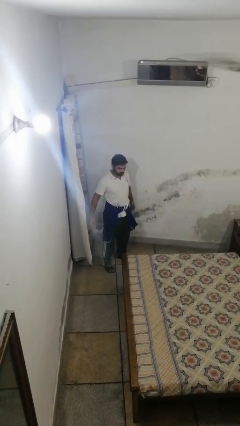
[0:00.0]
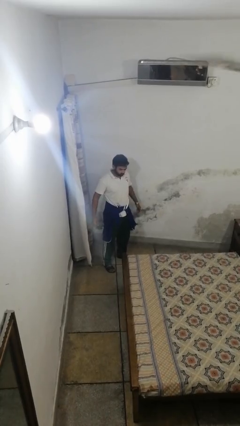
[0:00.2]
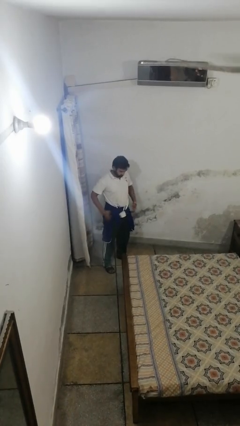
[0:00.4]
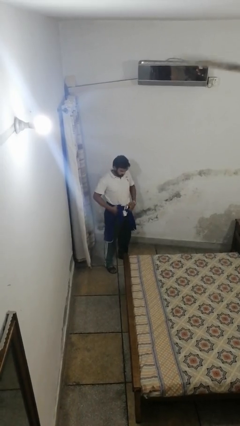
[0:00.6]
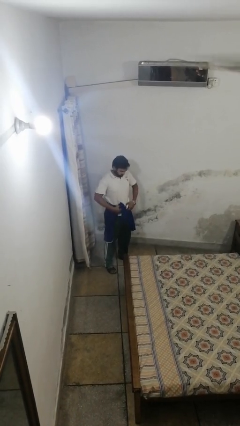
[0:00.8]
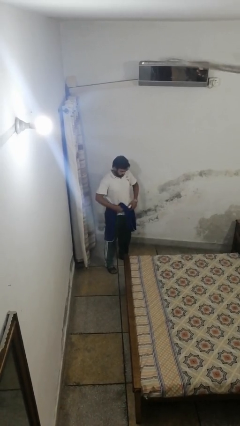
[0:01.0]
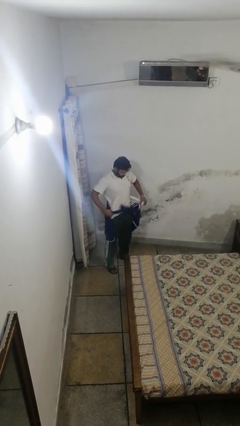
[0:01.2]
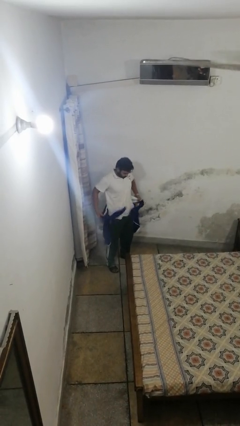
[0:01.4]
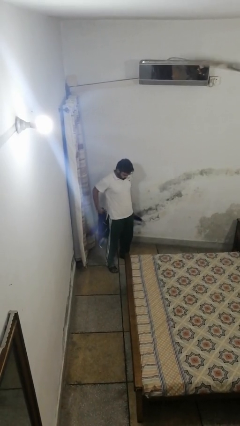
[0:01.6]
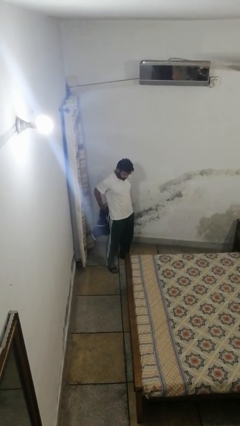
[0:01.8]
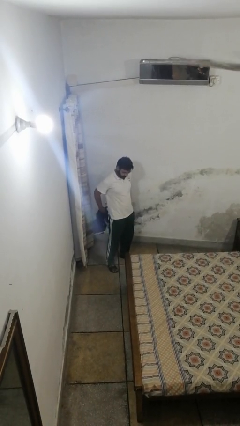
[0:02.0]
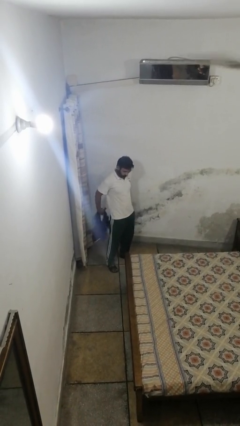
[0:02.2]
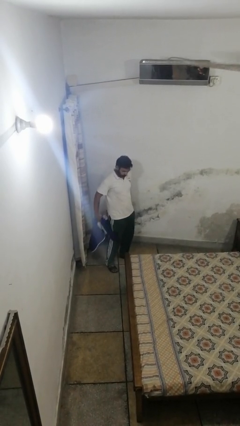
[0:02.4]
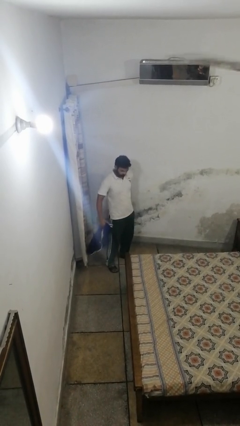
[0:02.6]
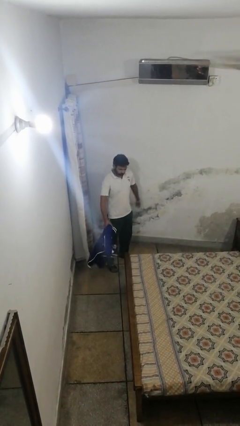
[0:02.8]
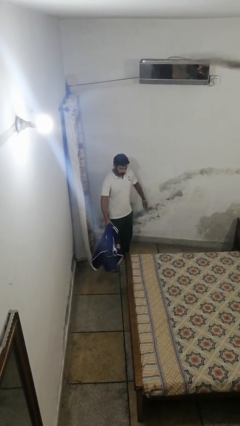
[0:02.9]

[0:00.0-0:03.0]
person unties jacket around waist

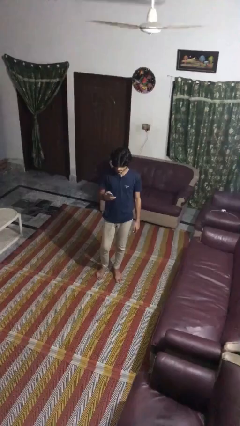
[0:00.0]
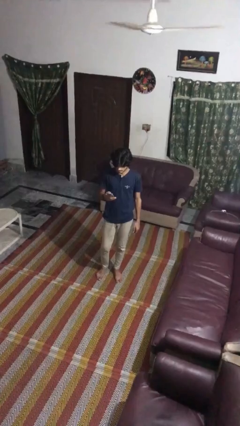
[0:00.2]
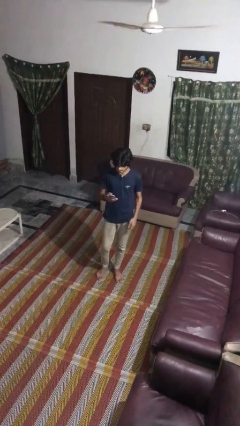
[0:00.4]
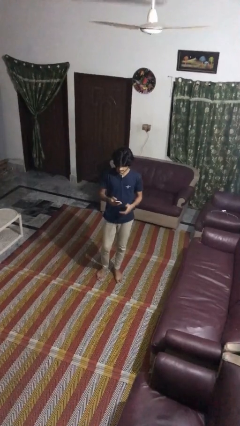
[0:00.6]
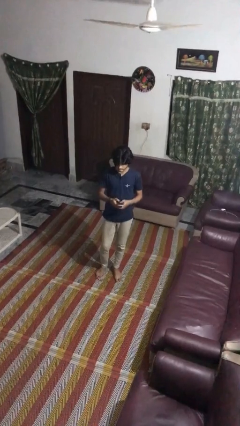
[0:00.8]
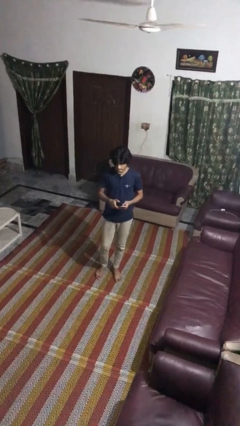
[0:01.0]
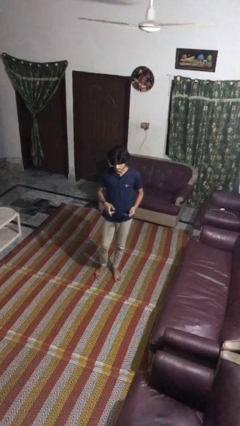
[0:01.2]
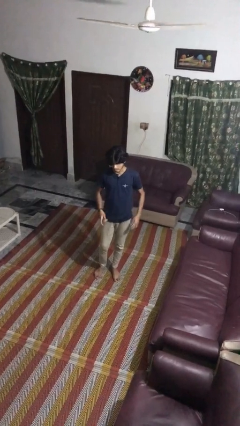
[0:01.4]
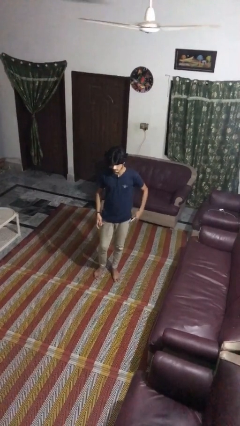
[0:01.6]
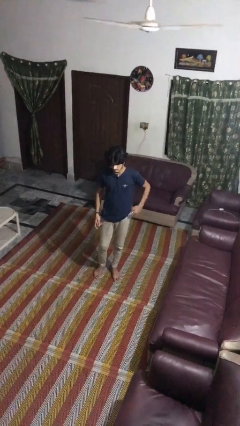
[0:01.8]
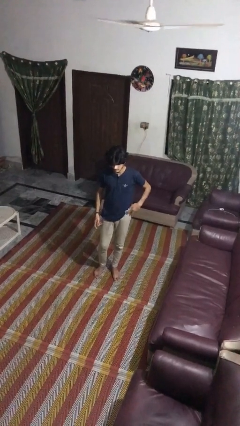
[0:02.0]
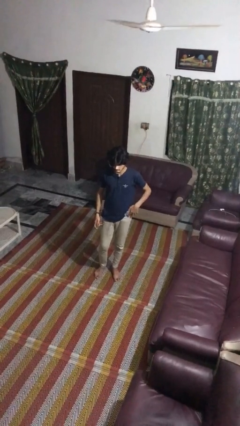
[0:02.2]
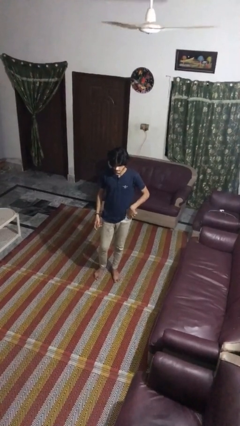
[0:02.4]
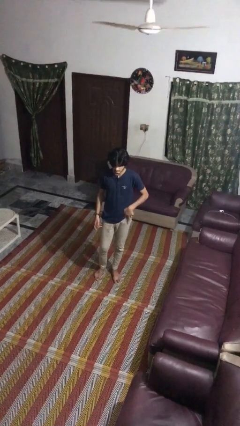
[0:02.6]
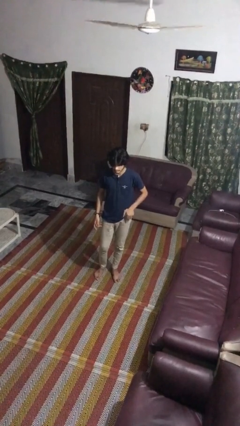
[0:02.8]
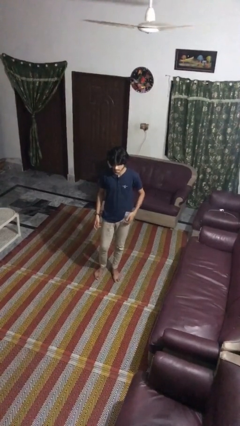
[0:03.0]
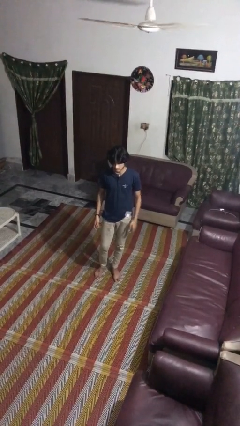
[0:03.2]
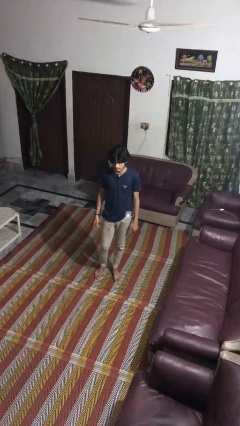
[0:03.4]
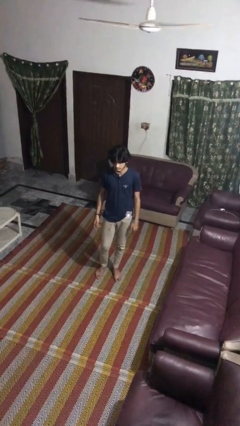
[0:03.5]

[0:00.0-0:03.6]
person puts phone into pocket

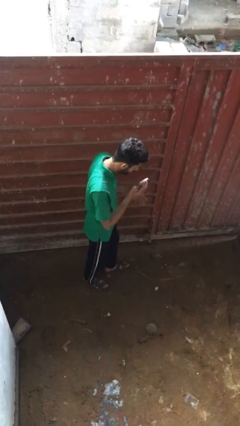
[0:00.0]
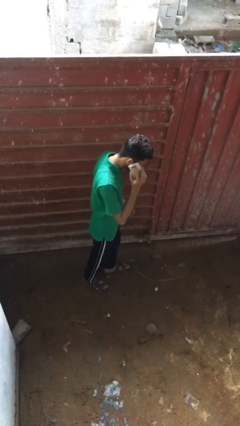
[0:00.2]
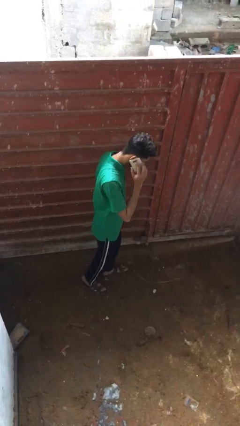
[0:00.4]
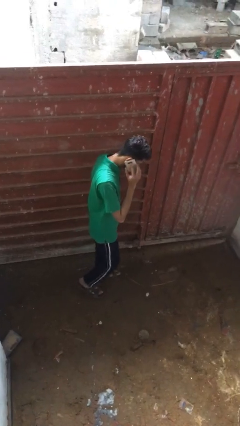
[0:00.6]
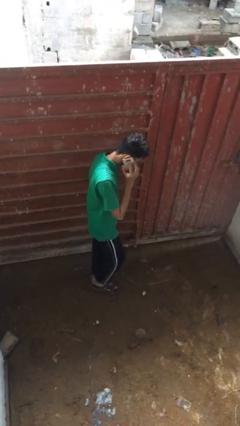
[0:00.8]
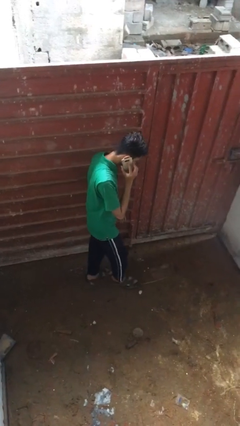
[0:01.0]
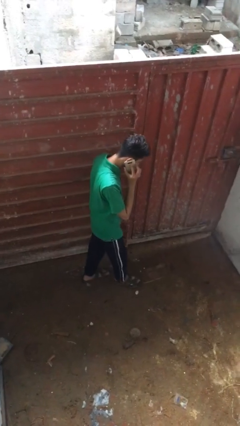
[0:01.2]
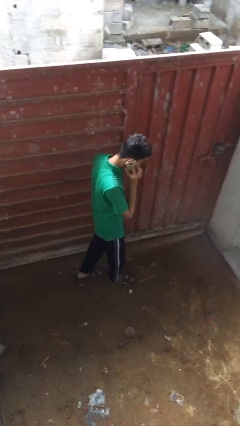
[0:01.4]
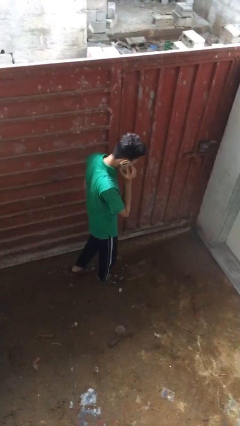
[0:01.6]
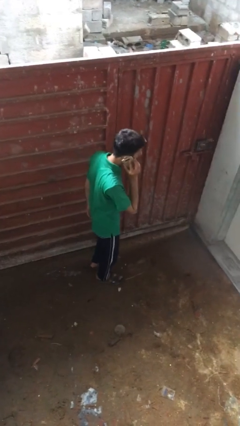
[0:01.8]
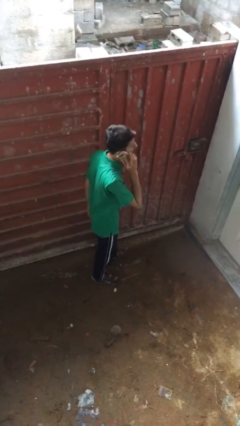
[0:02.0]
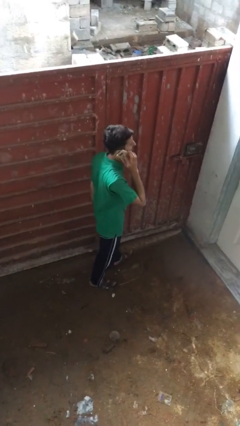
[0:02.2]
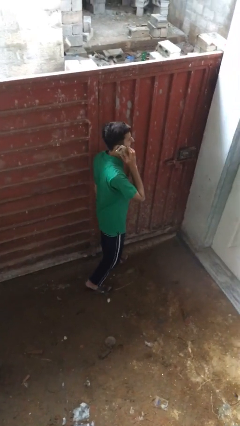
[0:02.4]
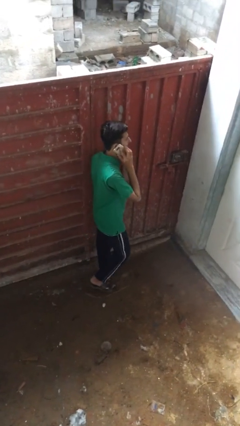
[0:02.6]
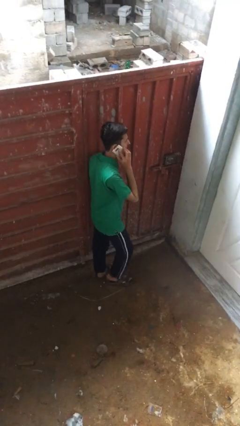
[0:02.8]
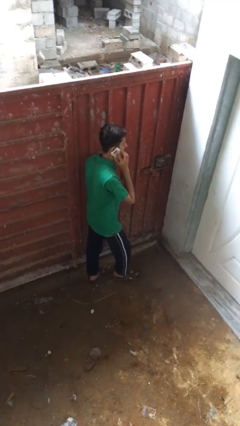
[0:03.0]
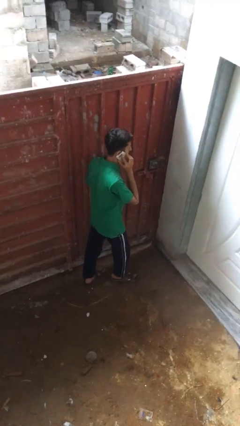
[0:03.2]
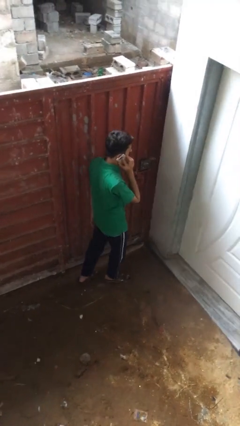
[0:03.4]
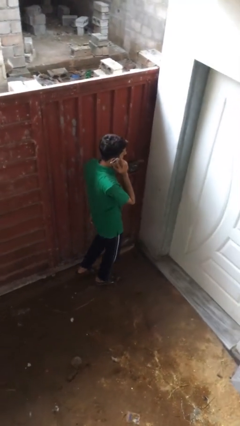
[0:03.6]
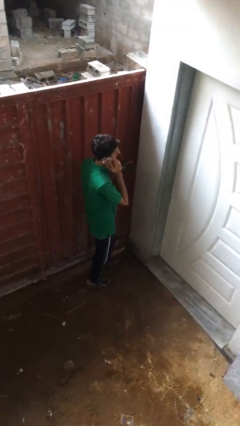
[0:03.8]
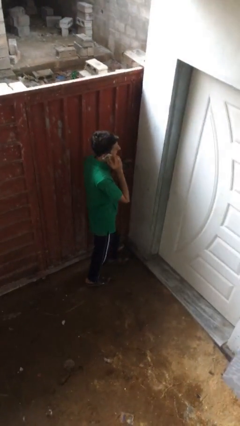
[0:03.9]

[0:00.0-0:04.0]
person talks on phone

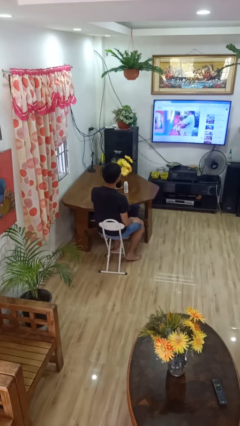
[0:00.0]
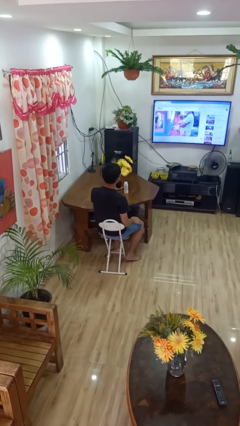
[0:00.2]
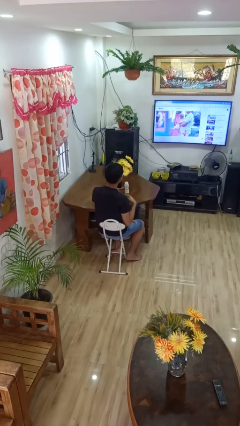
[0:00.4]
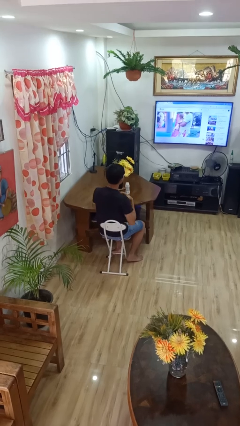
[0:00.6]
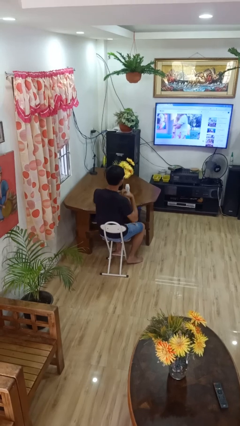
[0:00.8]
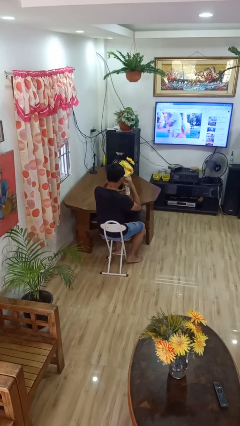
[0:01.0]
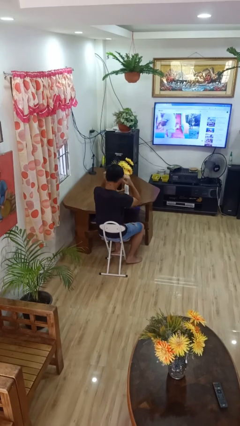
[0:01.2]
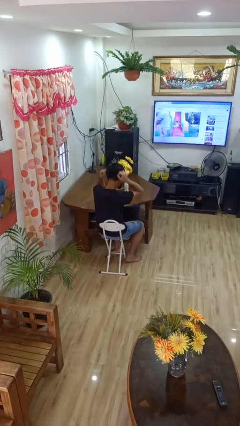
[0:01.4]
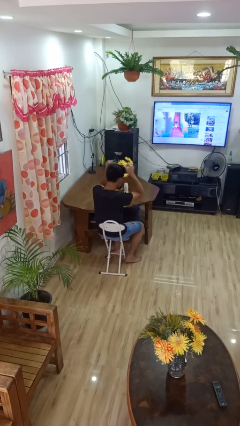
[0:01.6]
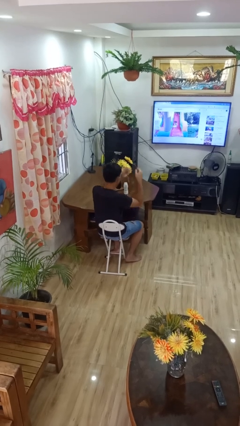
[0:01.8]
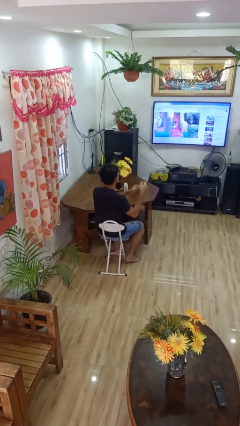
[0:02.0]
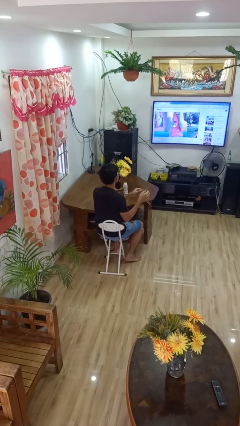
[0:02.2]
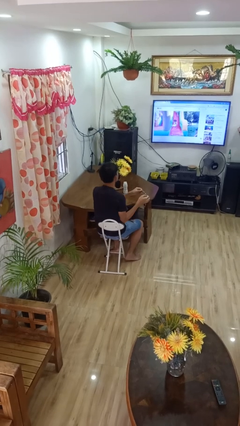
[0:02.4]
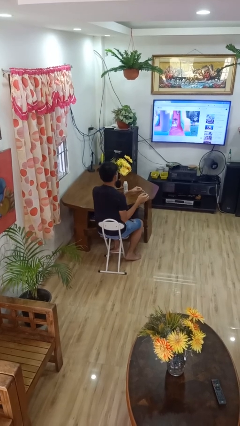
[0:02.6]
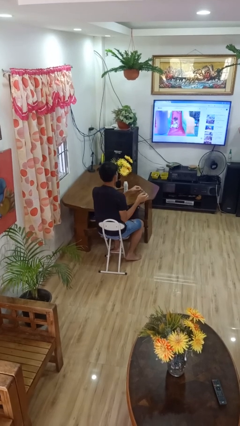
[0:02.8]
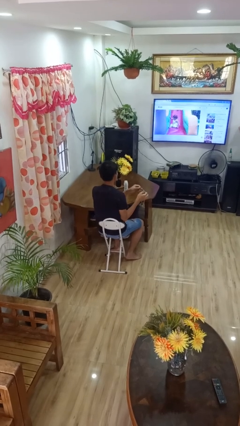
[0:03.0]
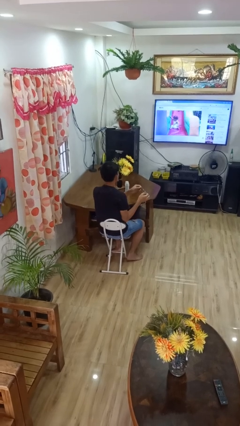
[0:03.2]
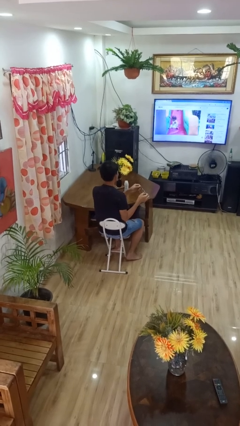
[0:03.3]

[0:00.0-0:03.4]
person takes off necklace

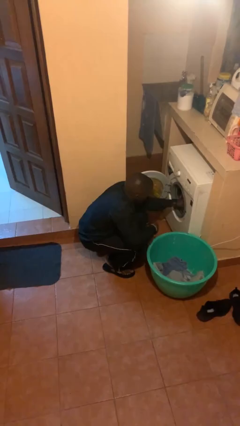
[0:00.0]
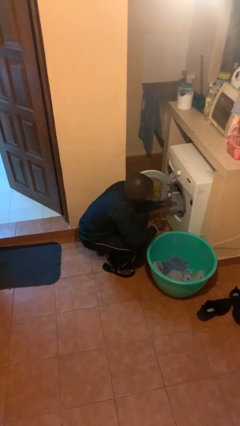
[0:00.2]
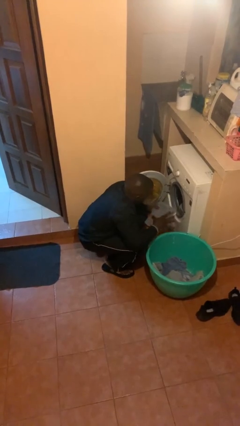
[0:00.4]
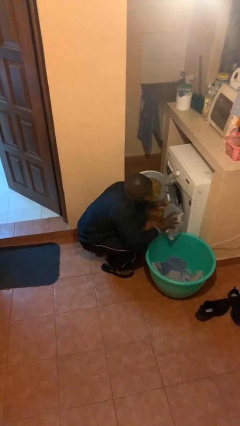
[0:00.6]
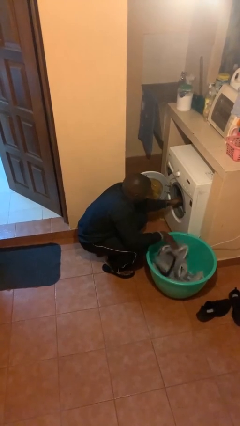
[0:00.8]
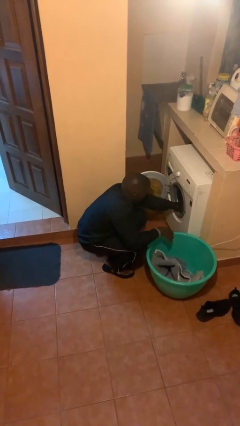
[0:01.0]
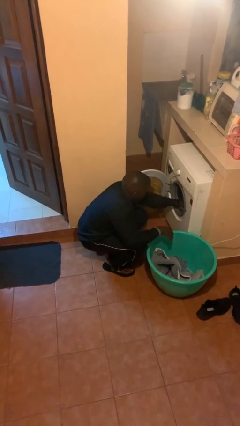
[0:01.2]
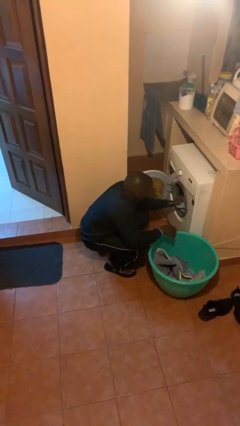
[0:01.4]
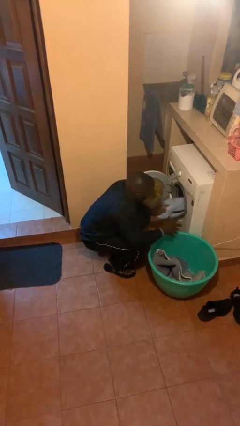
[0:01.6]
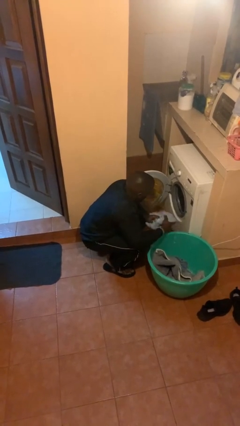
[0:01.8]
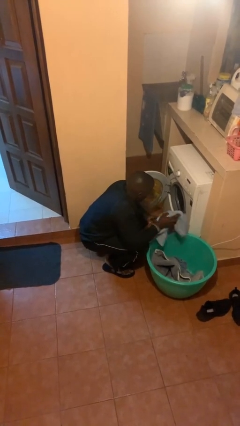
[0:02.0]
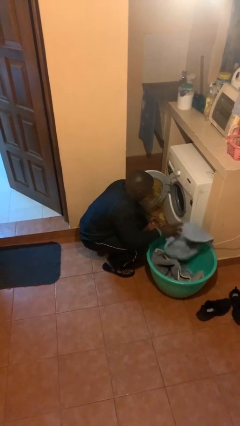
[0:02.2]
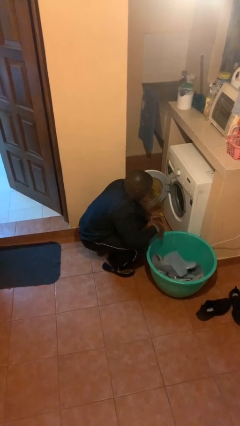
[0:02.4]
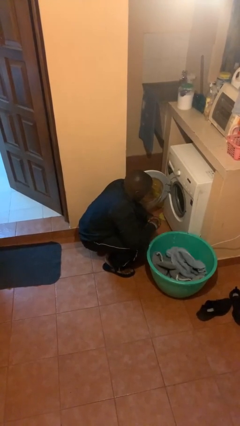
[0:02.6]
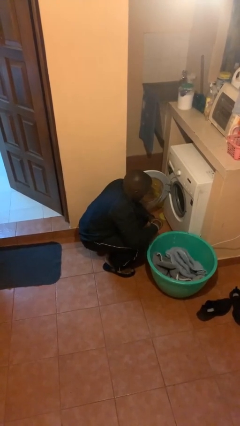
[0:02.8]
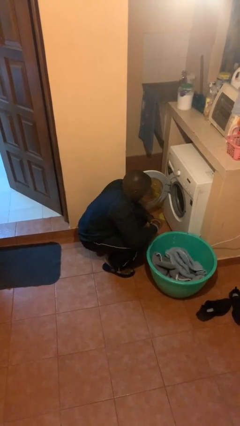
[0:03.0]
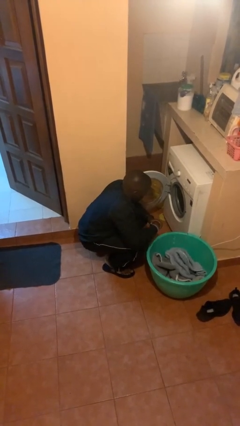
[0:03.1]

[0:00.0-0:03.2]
person loads clotheswasher

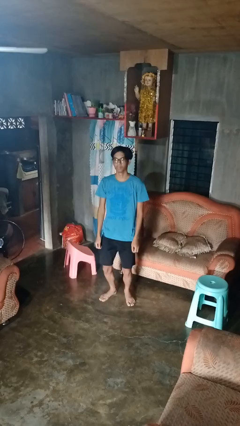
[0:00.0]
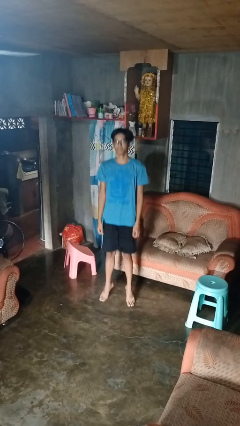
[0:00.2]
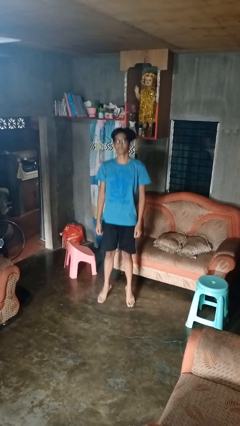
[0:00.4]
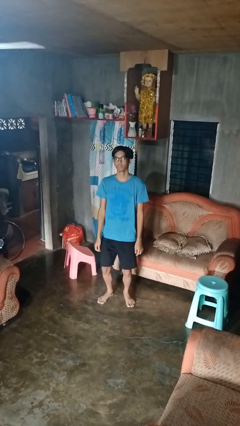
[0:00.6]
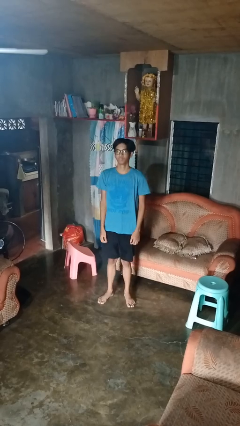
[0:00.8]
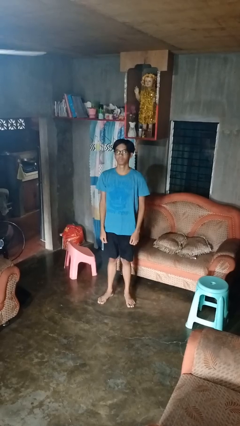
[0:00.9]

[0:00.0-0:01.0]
person jumps
